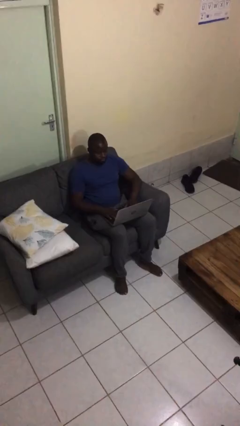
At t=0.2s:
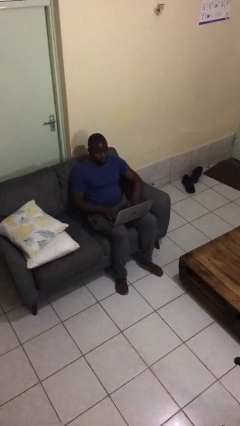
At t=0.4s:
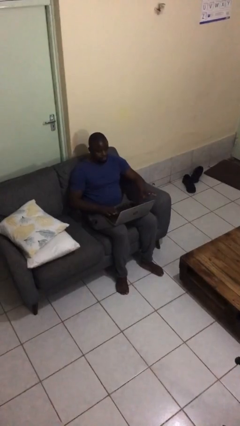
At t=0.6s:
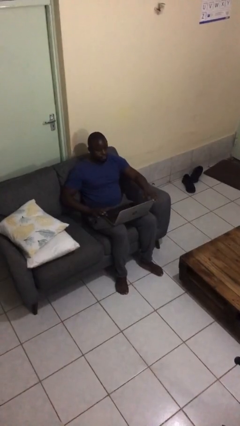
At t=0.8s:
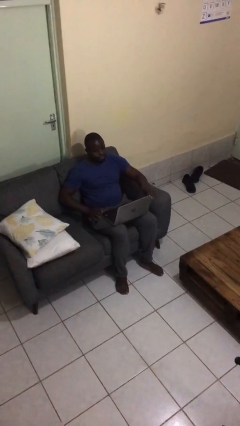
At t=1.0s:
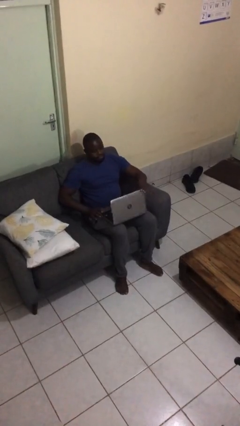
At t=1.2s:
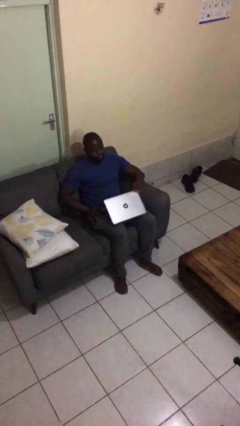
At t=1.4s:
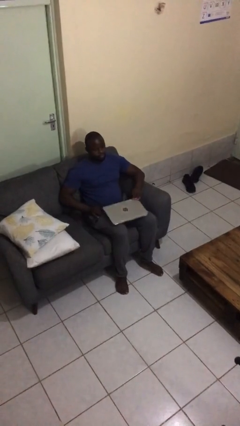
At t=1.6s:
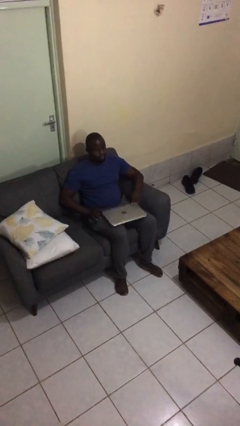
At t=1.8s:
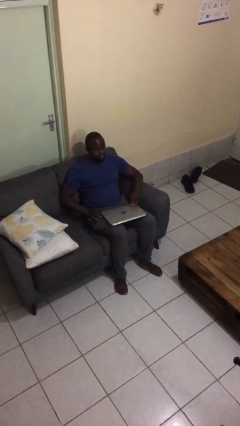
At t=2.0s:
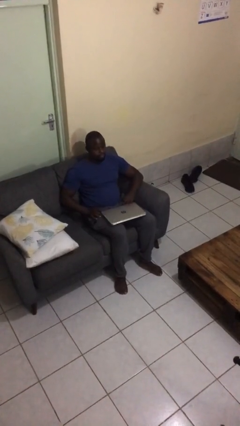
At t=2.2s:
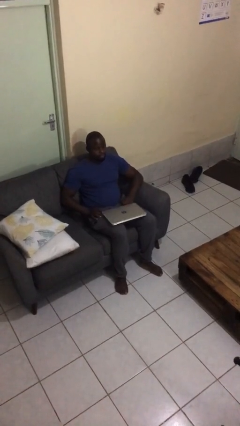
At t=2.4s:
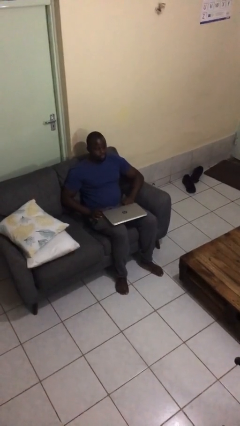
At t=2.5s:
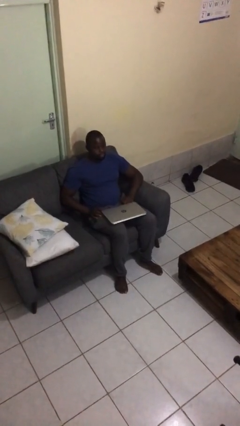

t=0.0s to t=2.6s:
person closes laptop

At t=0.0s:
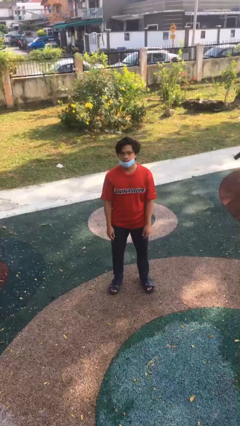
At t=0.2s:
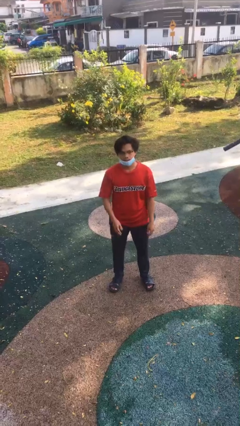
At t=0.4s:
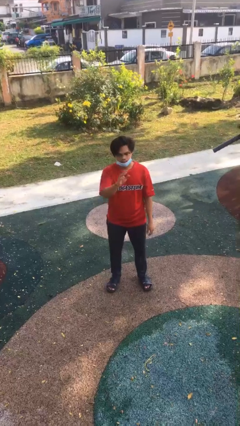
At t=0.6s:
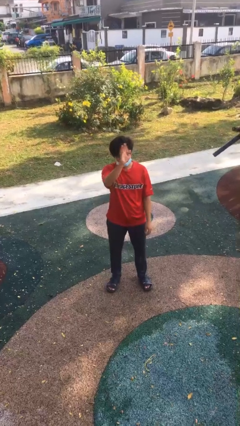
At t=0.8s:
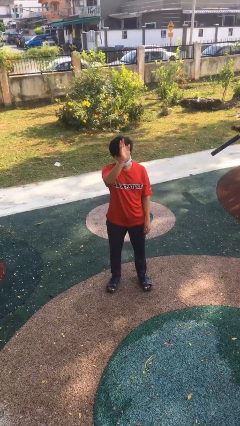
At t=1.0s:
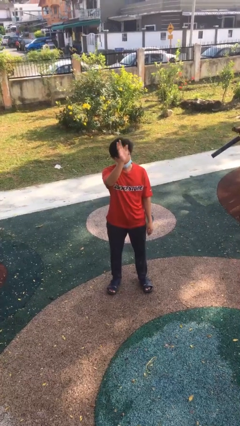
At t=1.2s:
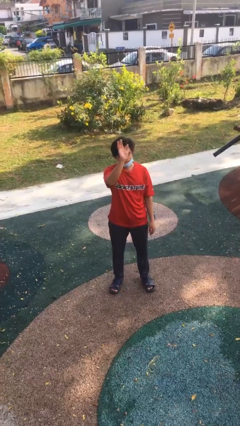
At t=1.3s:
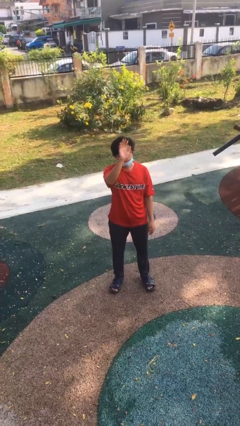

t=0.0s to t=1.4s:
person waves at person

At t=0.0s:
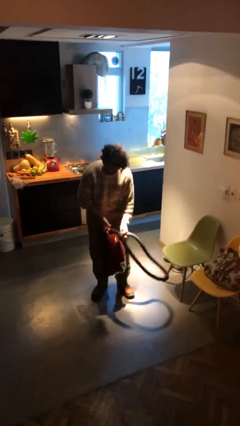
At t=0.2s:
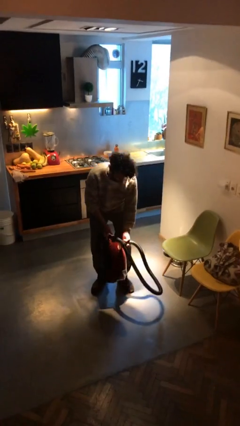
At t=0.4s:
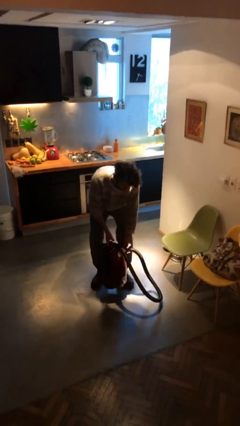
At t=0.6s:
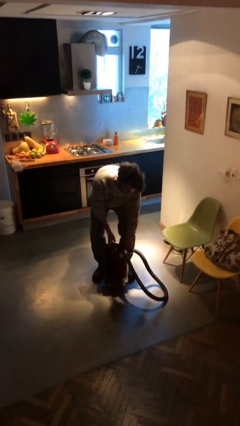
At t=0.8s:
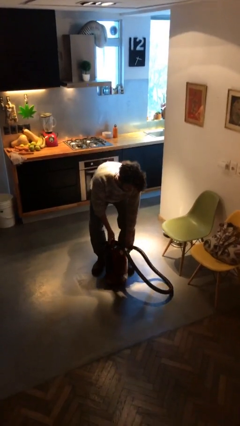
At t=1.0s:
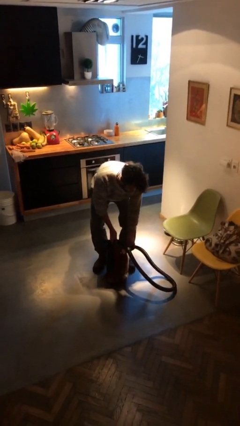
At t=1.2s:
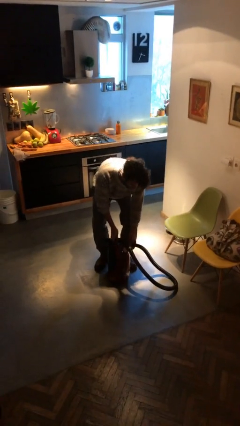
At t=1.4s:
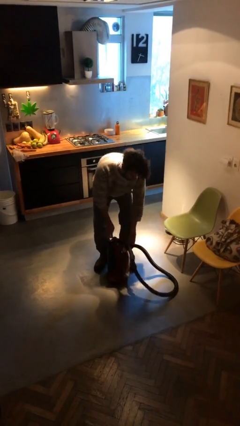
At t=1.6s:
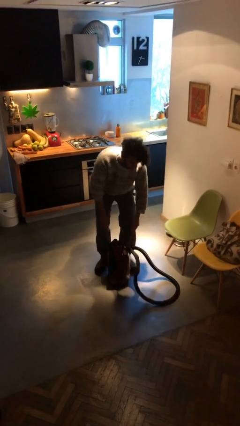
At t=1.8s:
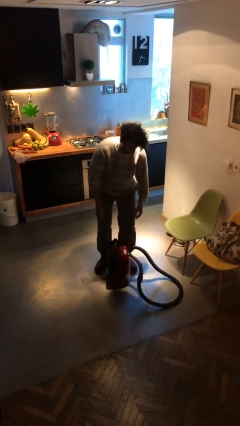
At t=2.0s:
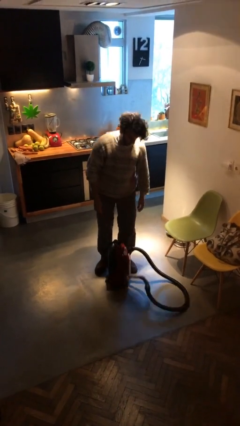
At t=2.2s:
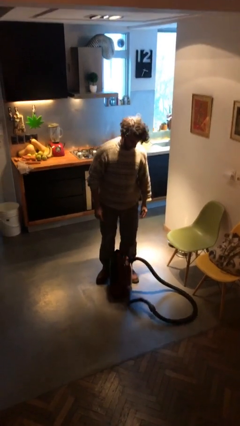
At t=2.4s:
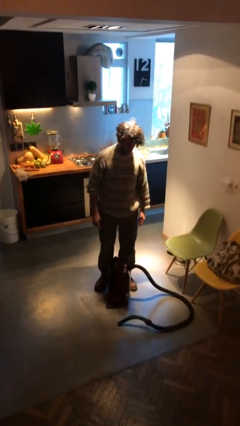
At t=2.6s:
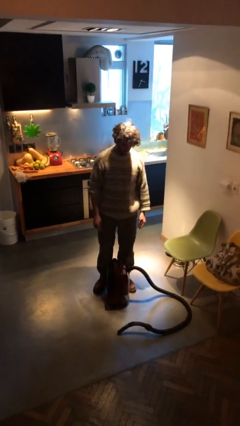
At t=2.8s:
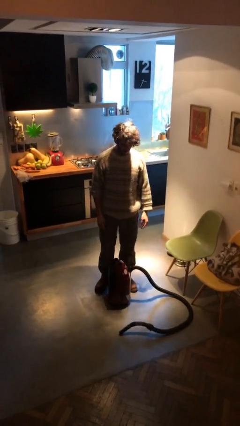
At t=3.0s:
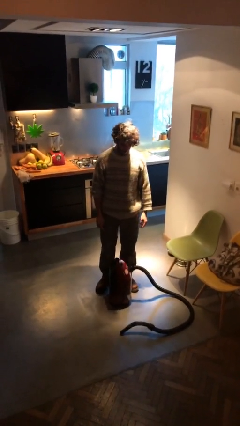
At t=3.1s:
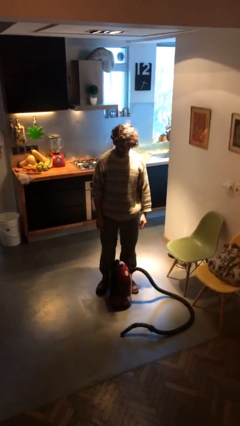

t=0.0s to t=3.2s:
person puts down object on floor

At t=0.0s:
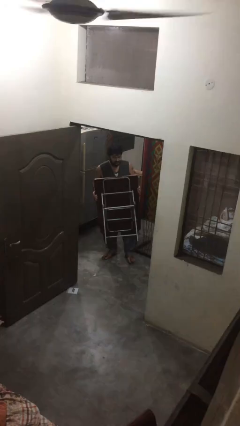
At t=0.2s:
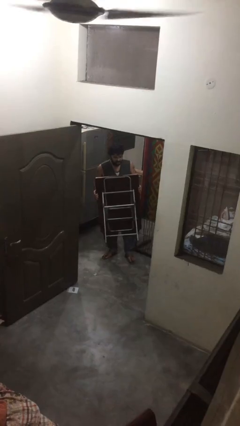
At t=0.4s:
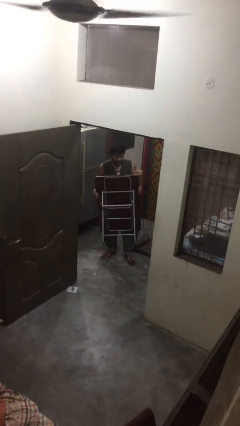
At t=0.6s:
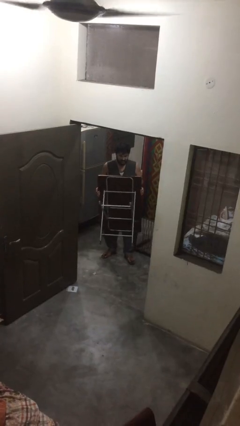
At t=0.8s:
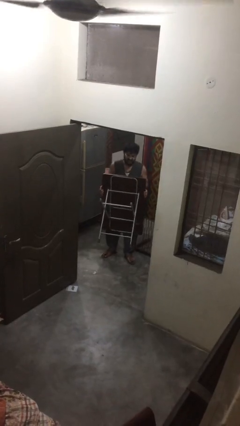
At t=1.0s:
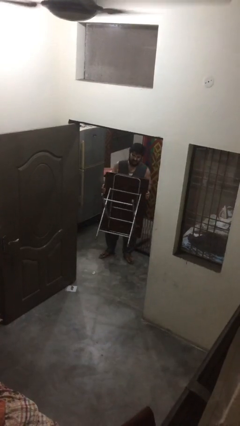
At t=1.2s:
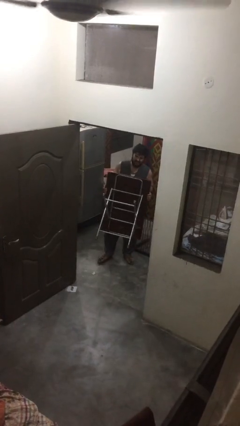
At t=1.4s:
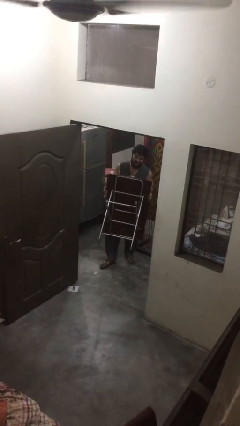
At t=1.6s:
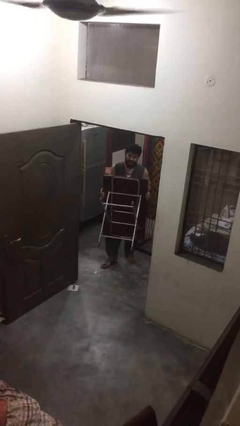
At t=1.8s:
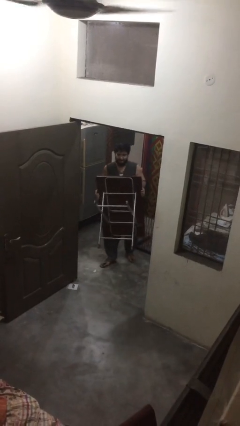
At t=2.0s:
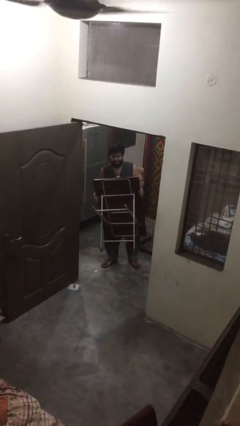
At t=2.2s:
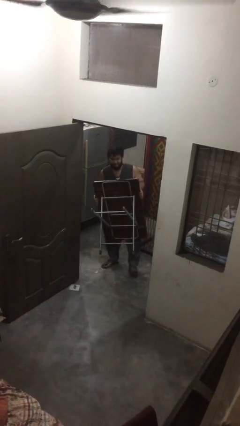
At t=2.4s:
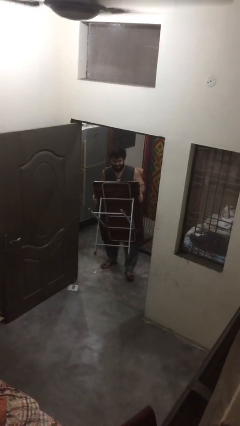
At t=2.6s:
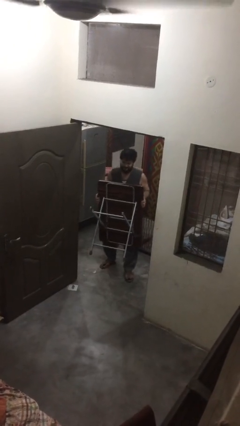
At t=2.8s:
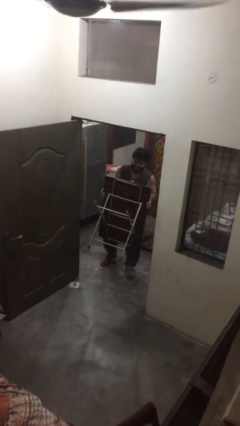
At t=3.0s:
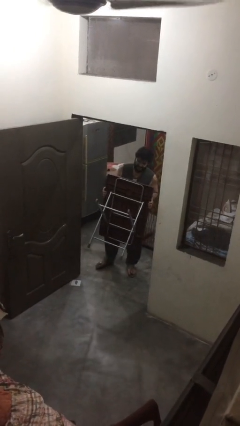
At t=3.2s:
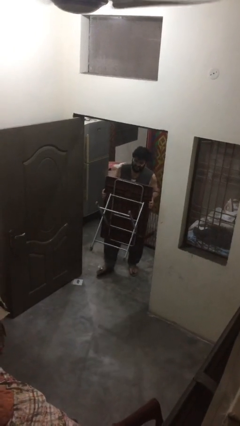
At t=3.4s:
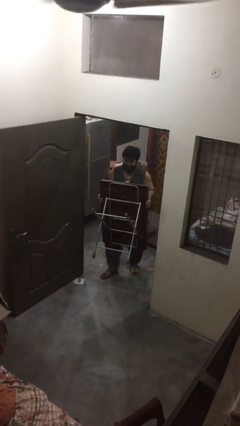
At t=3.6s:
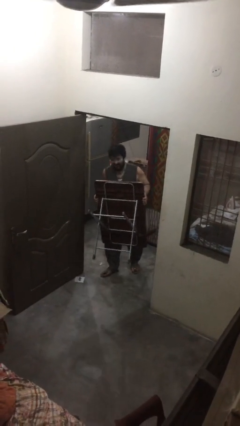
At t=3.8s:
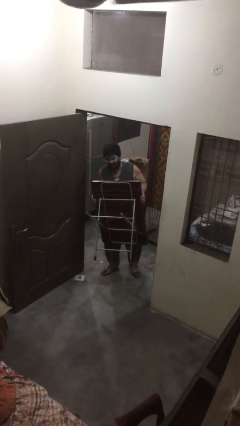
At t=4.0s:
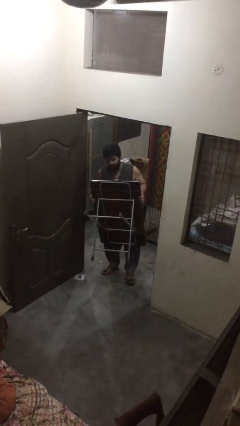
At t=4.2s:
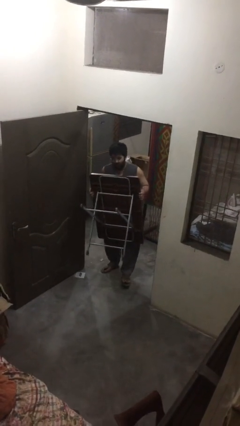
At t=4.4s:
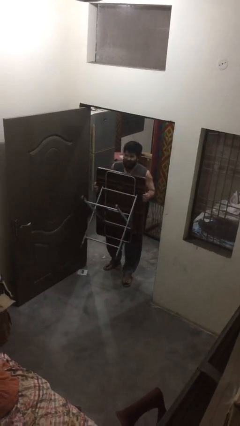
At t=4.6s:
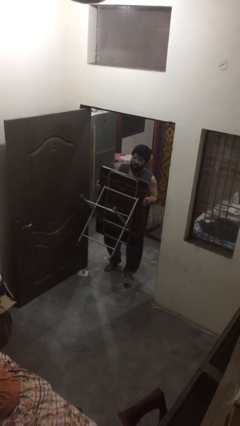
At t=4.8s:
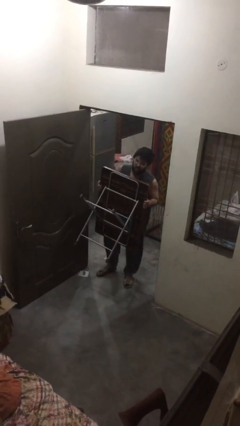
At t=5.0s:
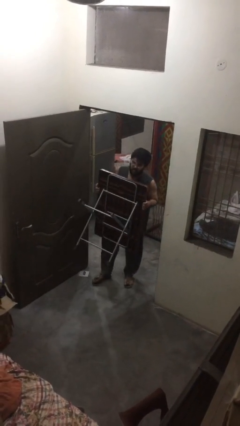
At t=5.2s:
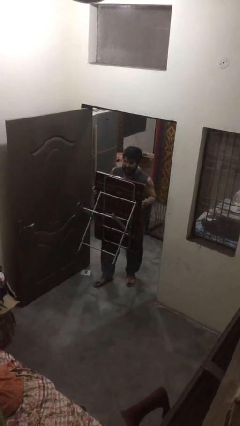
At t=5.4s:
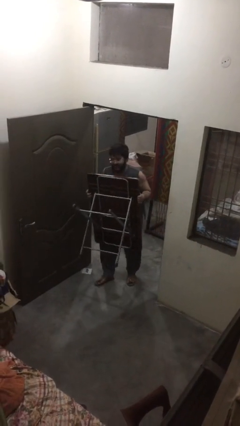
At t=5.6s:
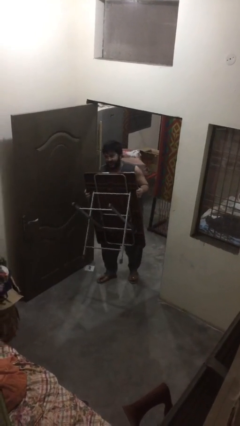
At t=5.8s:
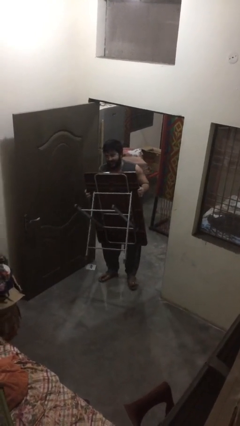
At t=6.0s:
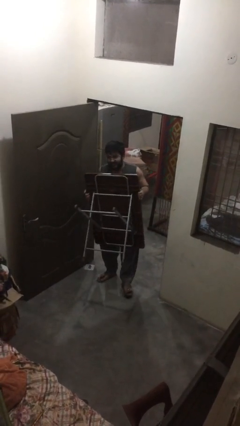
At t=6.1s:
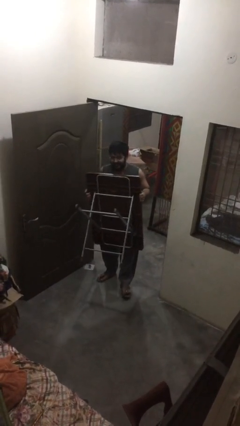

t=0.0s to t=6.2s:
person carries heavy object

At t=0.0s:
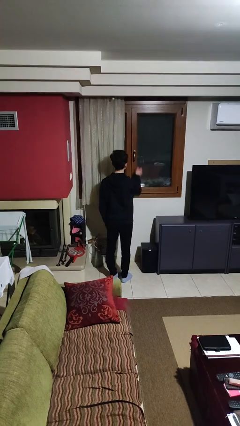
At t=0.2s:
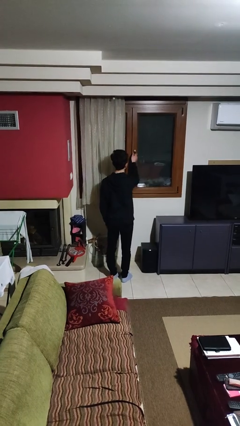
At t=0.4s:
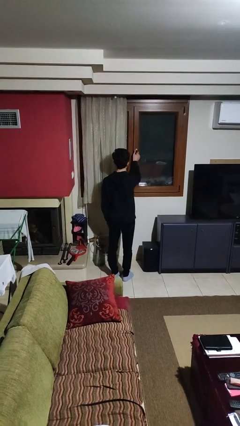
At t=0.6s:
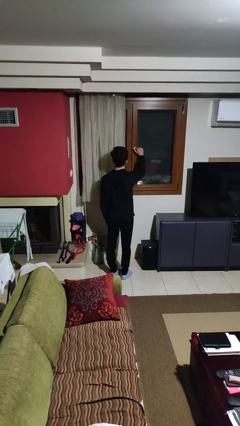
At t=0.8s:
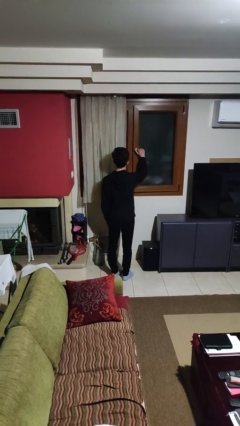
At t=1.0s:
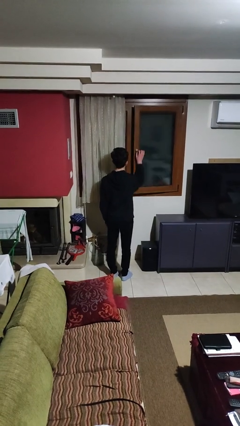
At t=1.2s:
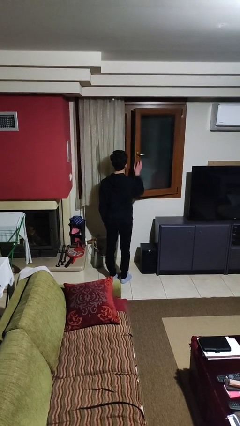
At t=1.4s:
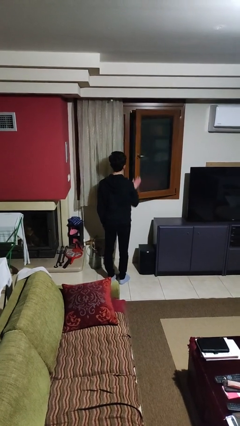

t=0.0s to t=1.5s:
person opens home window

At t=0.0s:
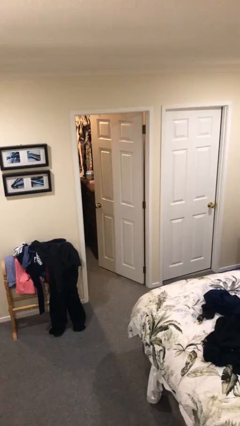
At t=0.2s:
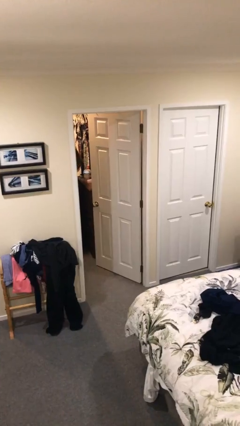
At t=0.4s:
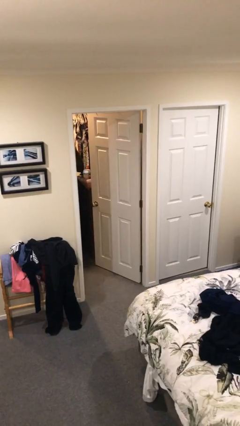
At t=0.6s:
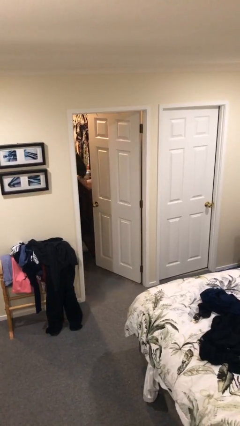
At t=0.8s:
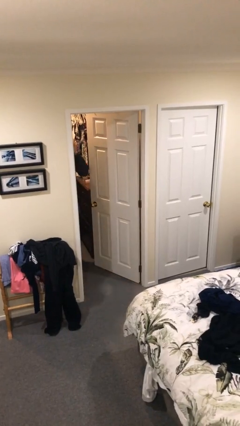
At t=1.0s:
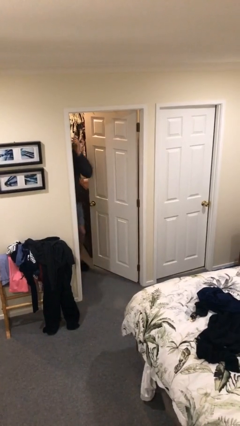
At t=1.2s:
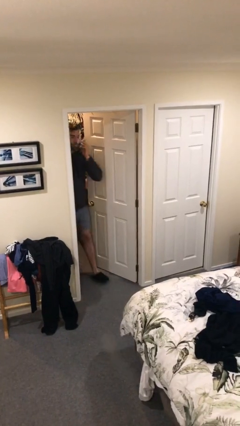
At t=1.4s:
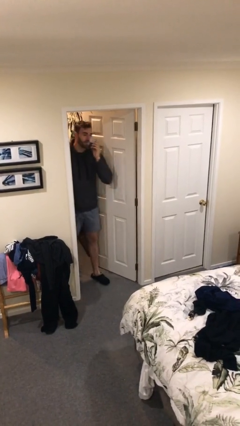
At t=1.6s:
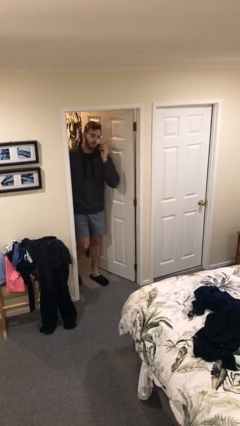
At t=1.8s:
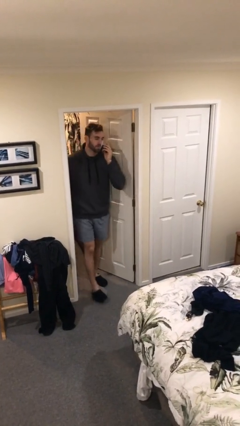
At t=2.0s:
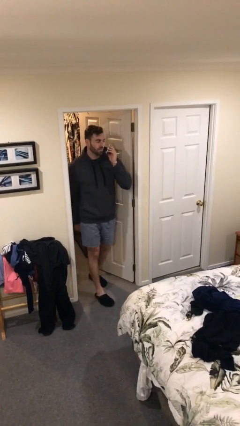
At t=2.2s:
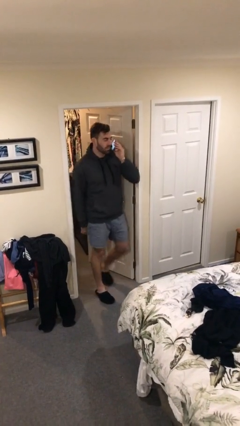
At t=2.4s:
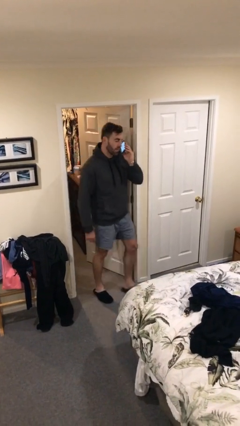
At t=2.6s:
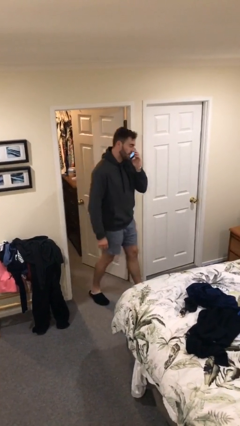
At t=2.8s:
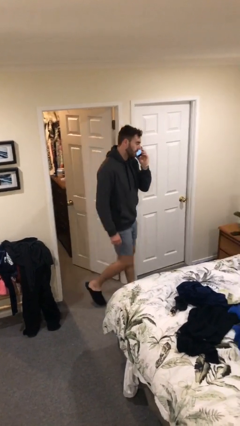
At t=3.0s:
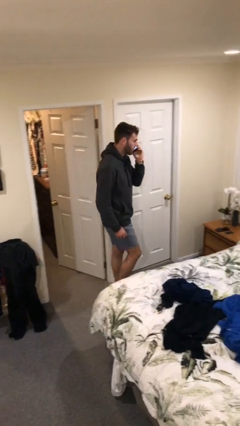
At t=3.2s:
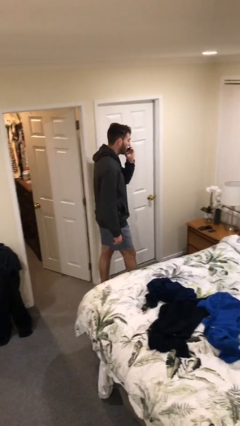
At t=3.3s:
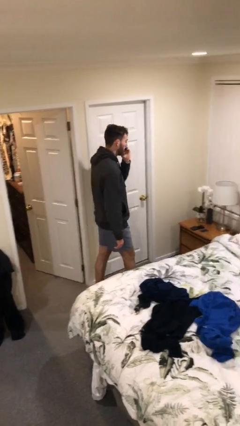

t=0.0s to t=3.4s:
person enters scene through structure
